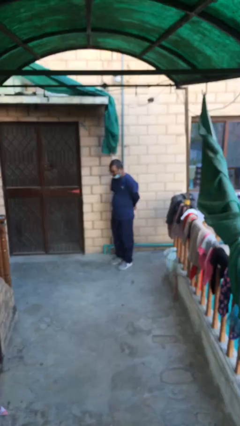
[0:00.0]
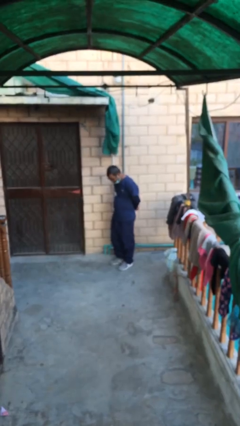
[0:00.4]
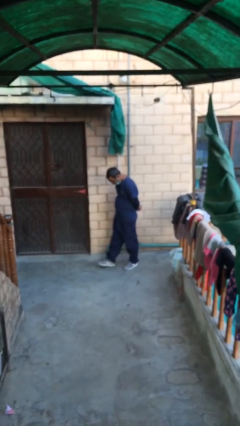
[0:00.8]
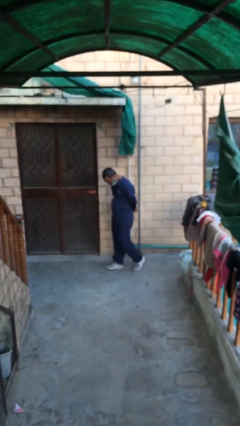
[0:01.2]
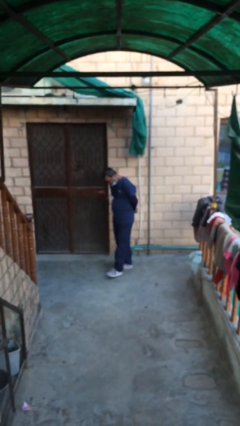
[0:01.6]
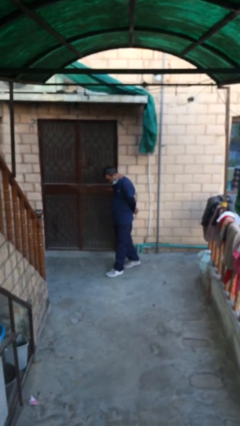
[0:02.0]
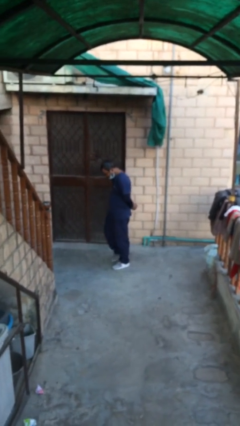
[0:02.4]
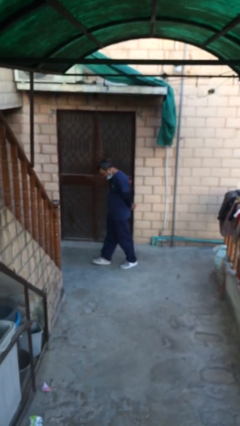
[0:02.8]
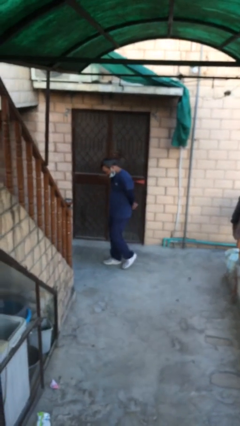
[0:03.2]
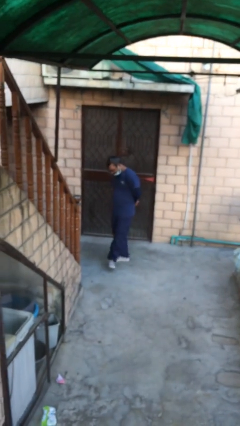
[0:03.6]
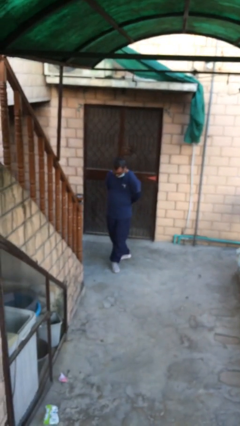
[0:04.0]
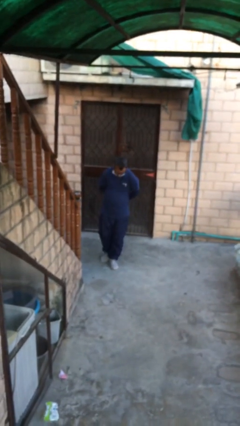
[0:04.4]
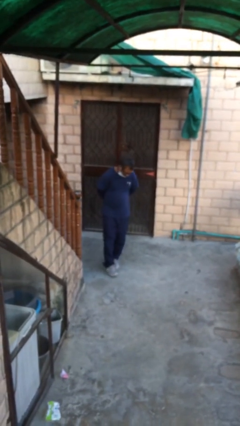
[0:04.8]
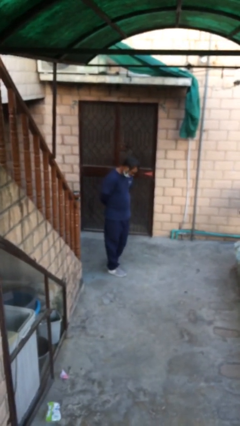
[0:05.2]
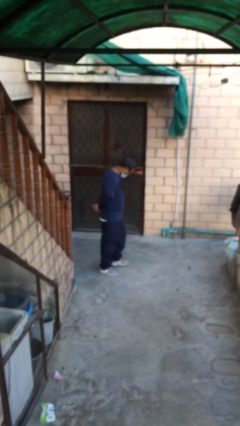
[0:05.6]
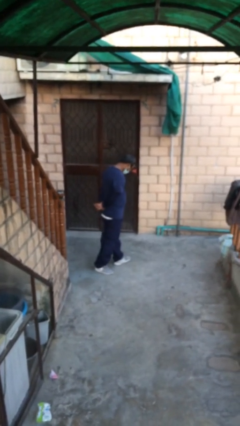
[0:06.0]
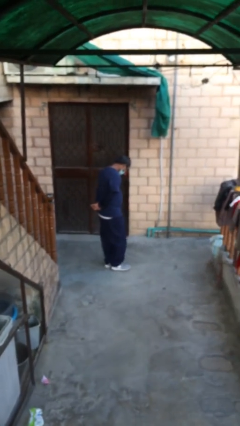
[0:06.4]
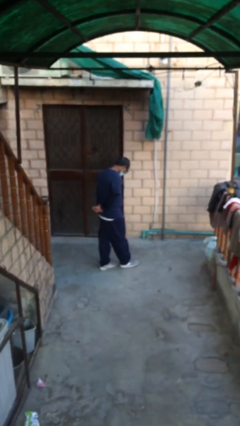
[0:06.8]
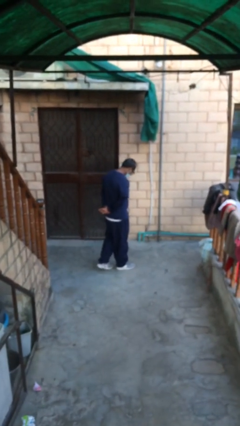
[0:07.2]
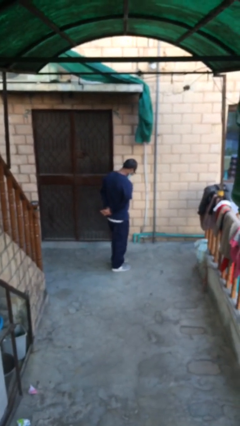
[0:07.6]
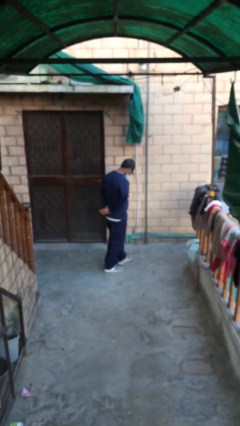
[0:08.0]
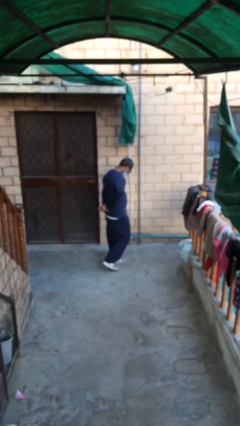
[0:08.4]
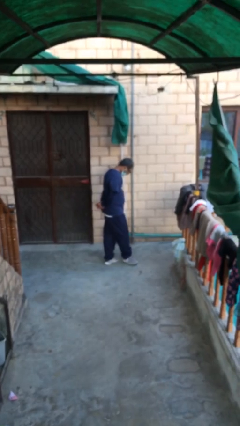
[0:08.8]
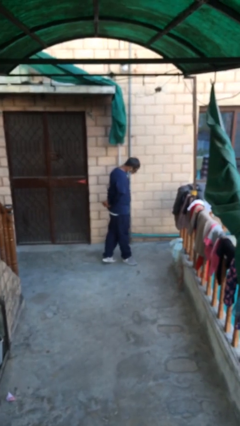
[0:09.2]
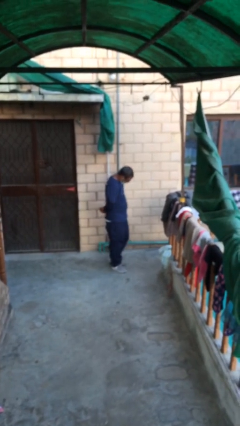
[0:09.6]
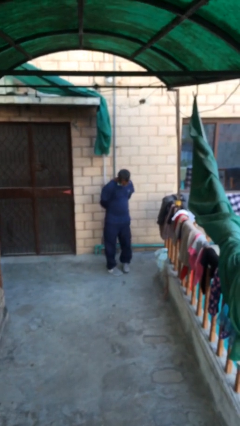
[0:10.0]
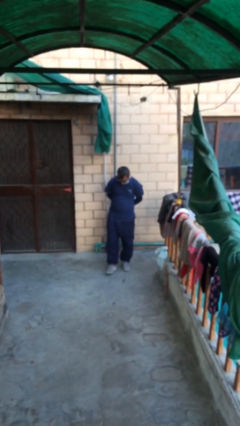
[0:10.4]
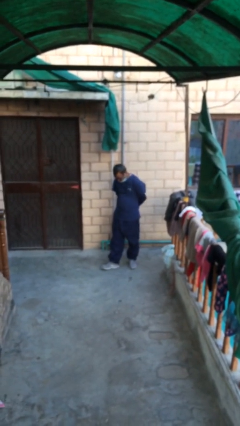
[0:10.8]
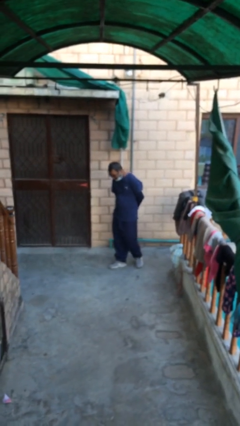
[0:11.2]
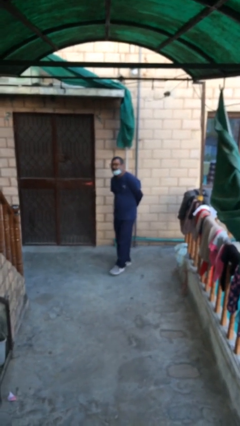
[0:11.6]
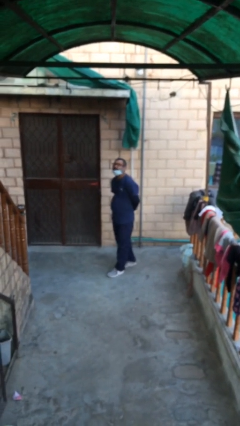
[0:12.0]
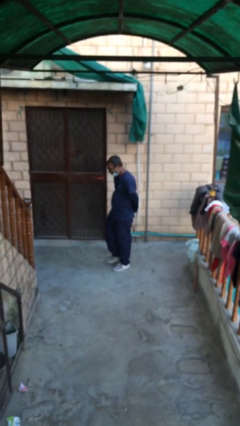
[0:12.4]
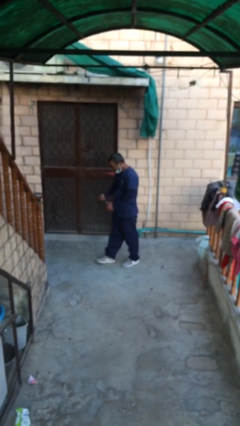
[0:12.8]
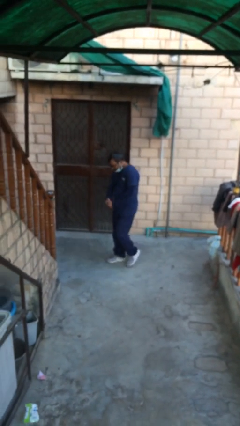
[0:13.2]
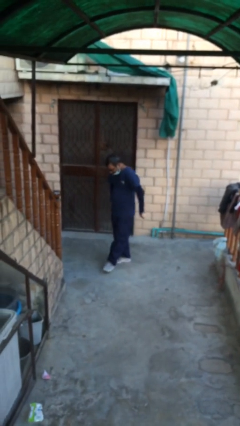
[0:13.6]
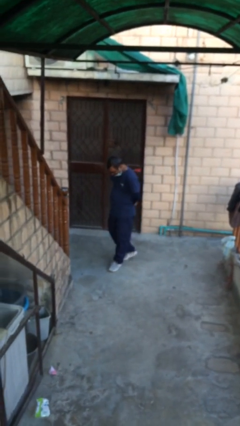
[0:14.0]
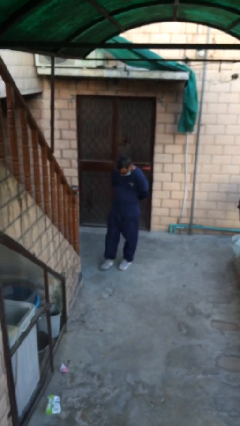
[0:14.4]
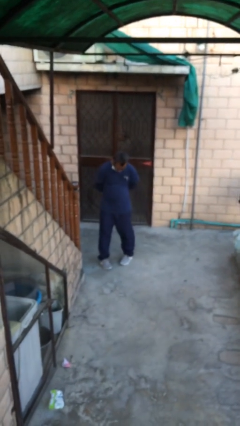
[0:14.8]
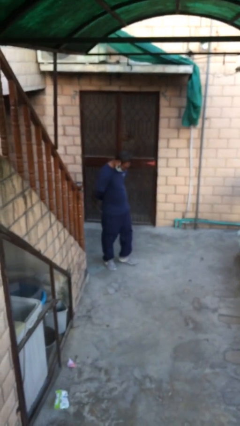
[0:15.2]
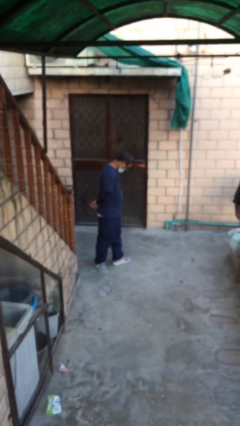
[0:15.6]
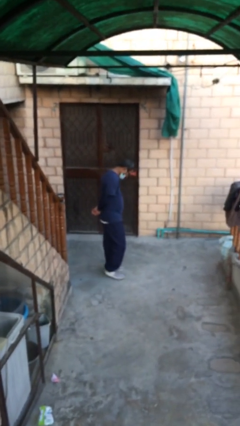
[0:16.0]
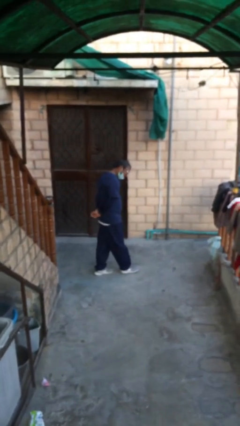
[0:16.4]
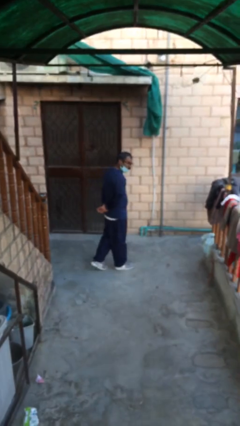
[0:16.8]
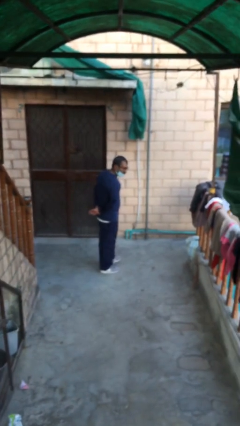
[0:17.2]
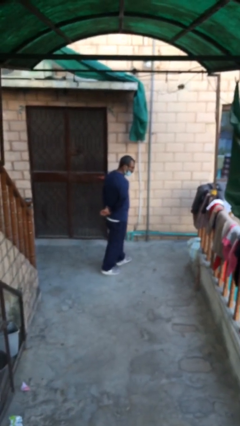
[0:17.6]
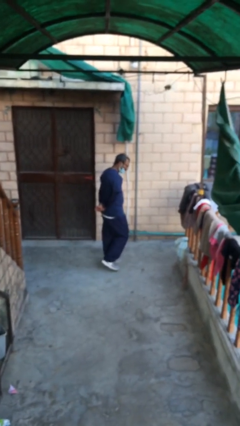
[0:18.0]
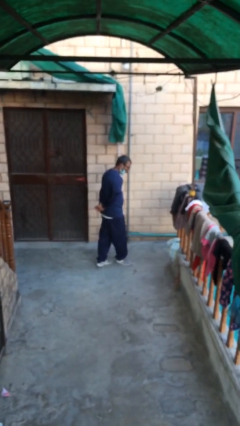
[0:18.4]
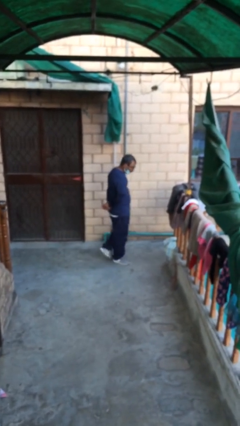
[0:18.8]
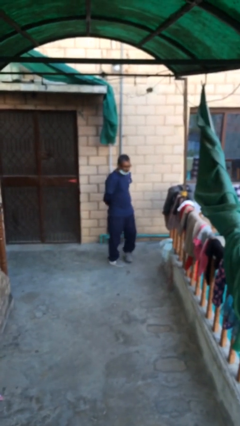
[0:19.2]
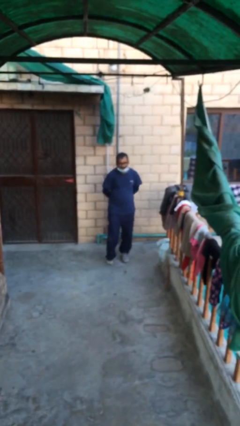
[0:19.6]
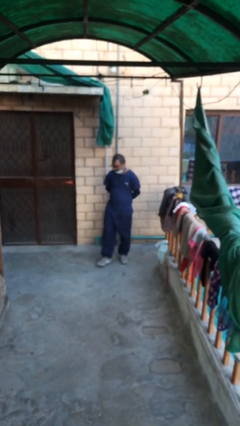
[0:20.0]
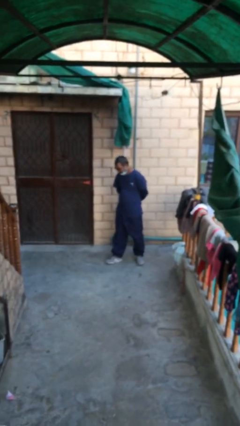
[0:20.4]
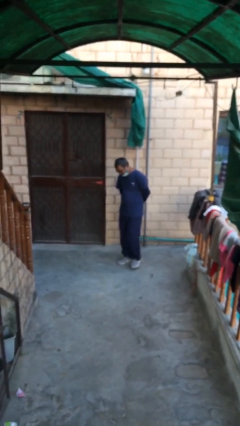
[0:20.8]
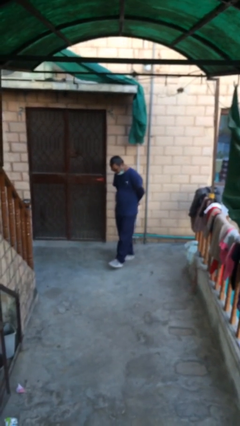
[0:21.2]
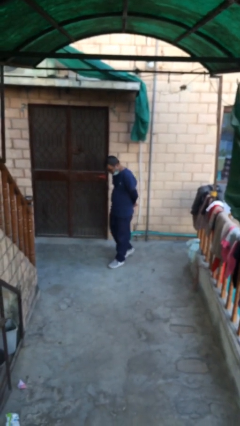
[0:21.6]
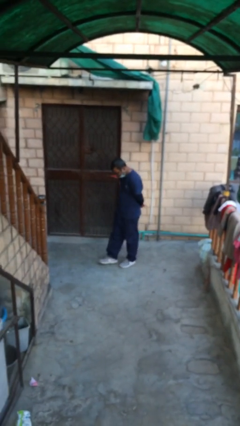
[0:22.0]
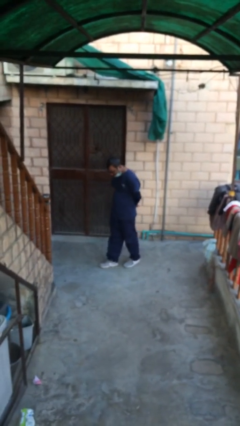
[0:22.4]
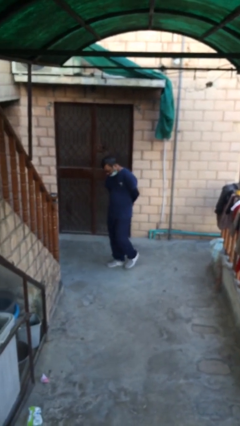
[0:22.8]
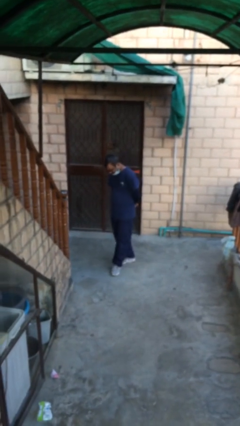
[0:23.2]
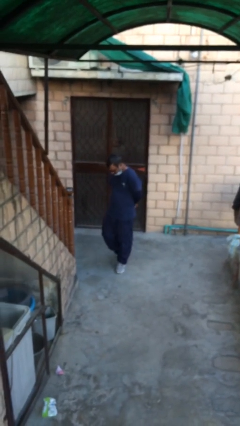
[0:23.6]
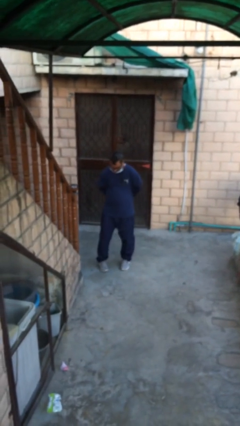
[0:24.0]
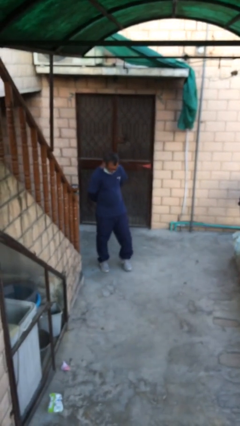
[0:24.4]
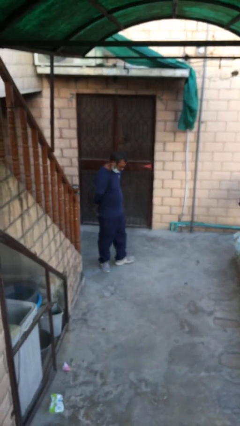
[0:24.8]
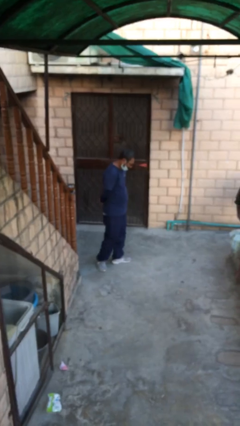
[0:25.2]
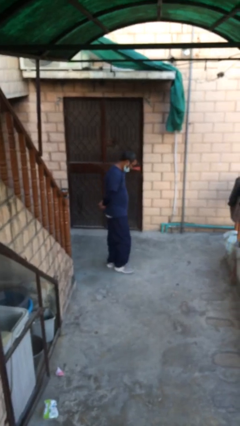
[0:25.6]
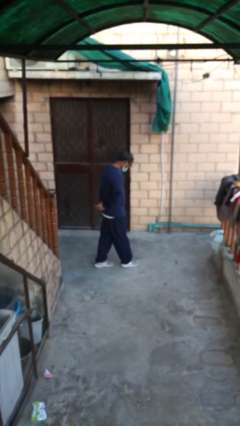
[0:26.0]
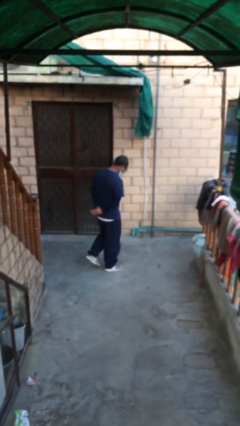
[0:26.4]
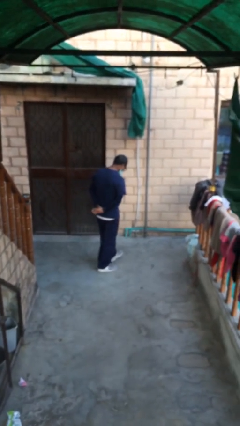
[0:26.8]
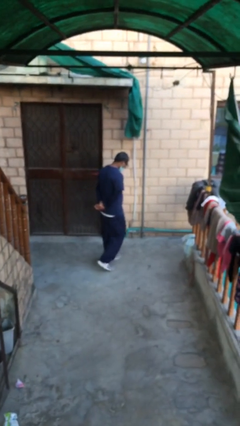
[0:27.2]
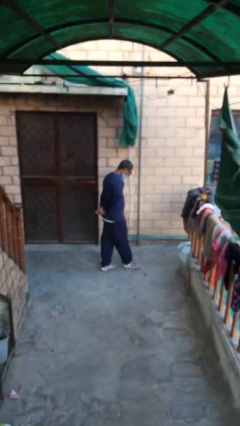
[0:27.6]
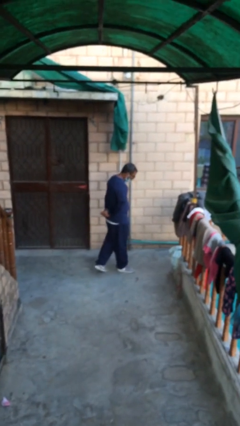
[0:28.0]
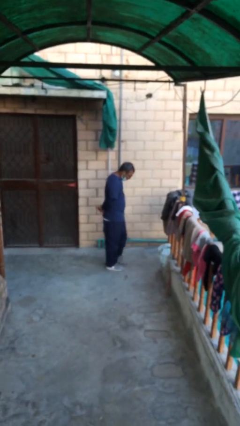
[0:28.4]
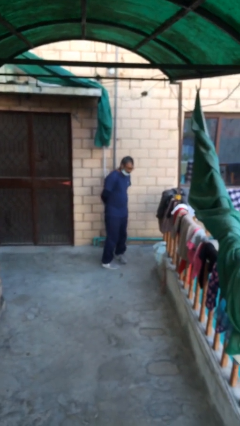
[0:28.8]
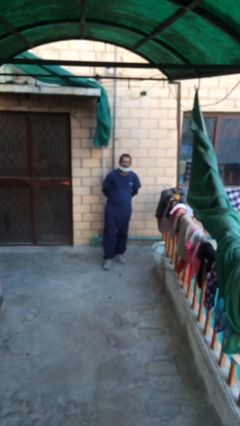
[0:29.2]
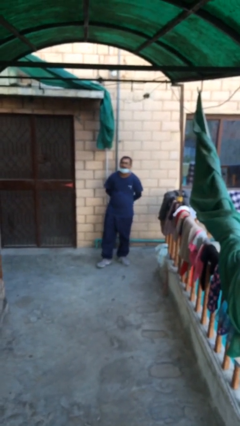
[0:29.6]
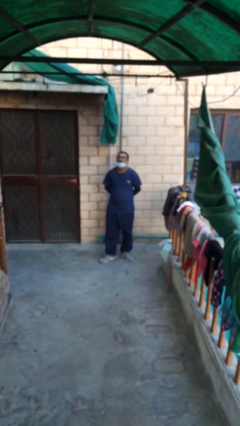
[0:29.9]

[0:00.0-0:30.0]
person walks

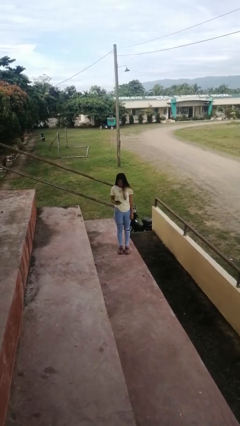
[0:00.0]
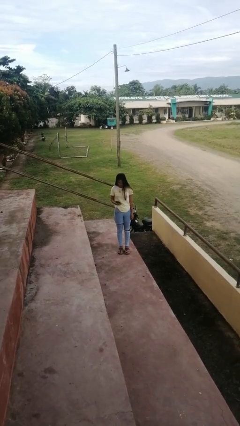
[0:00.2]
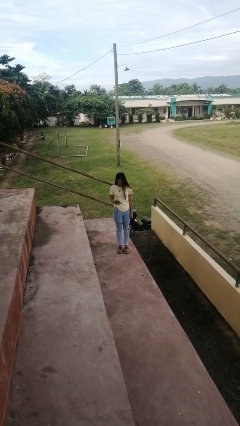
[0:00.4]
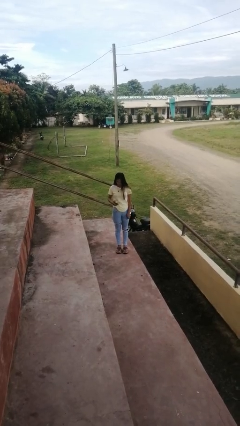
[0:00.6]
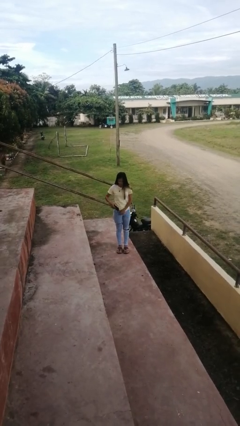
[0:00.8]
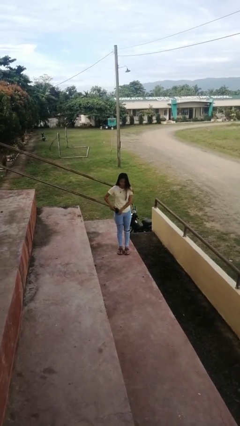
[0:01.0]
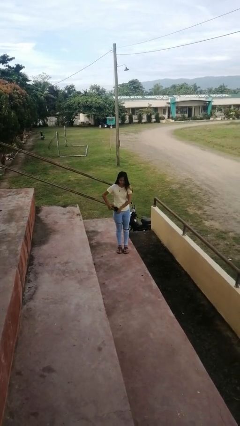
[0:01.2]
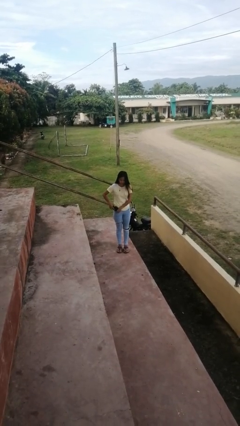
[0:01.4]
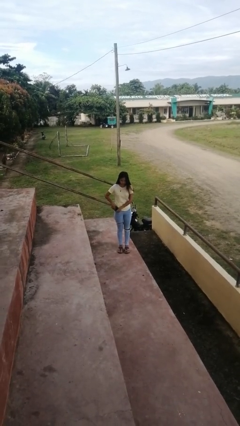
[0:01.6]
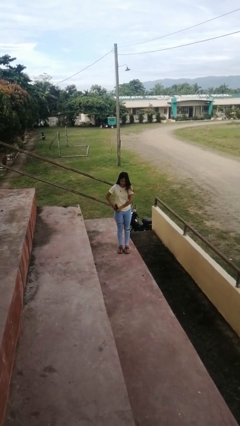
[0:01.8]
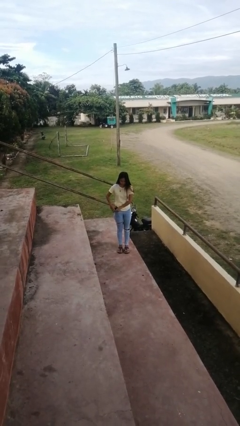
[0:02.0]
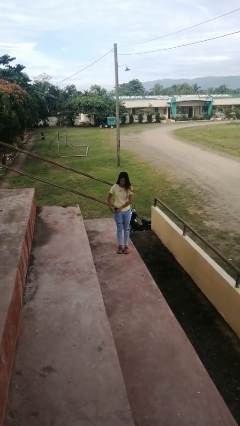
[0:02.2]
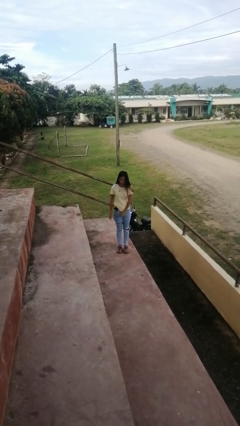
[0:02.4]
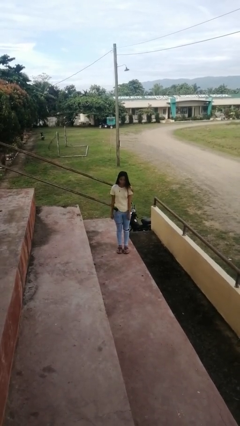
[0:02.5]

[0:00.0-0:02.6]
person puts phone into pocket

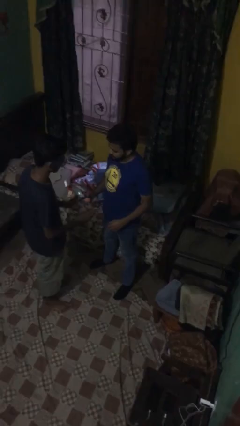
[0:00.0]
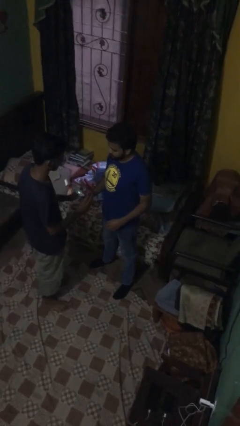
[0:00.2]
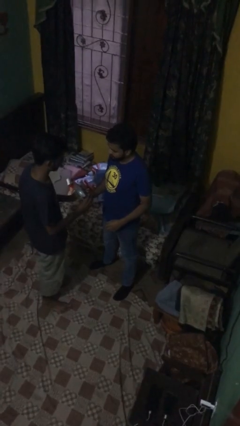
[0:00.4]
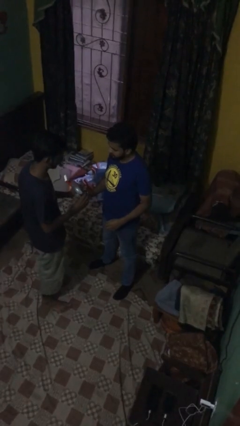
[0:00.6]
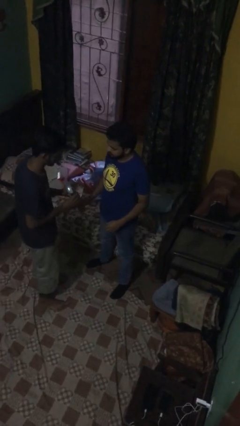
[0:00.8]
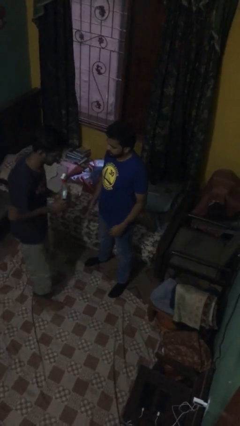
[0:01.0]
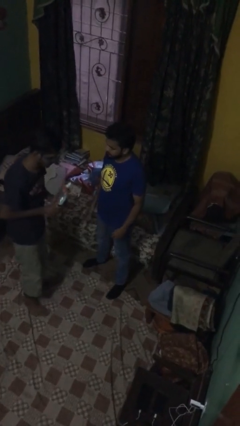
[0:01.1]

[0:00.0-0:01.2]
person transfers object to person
